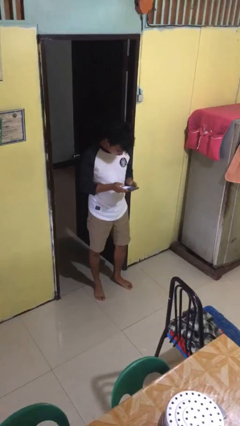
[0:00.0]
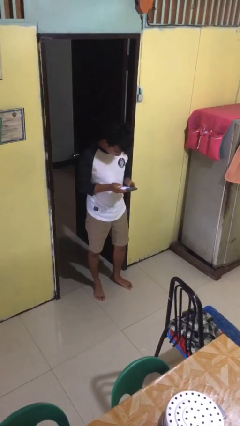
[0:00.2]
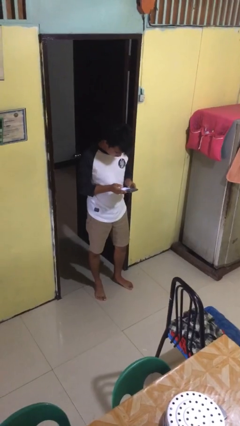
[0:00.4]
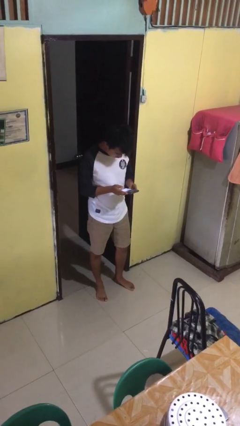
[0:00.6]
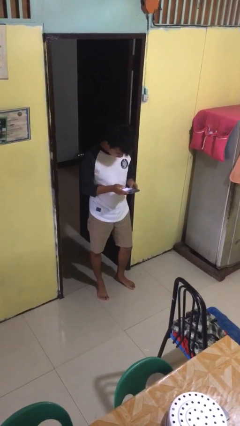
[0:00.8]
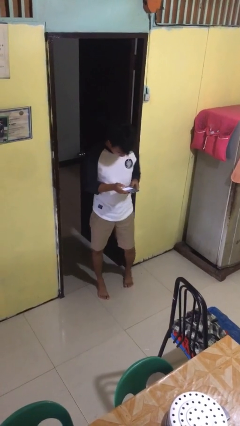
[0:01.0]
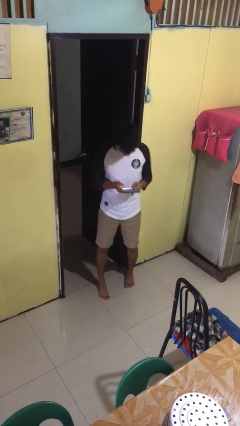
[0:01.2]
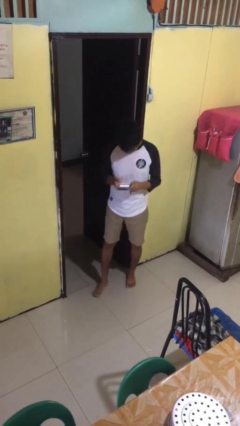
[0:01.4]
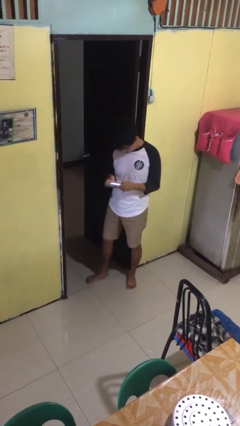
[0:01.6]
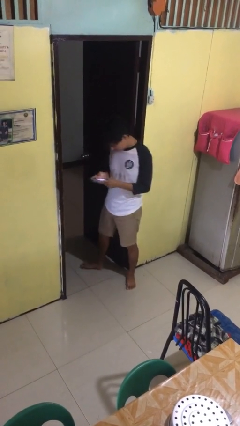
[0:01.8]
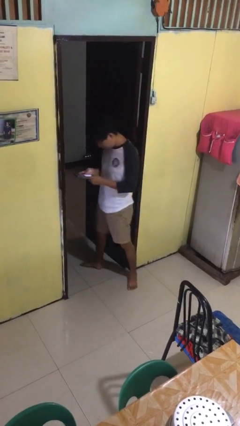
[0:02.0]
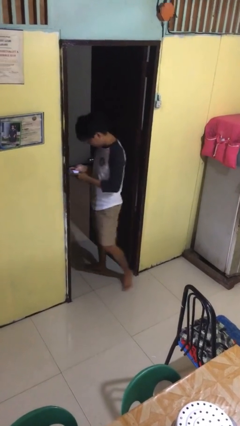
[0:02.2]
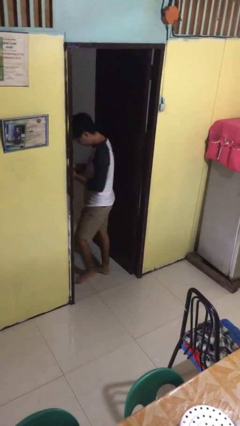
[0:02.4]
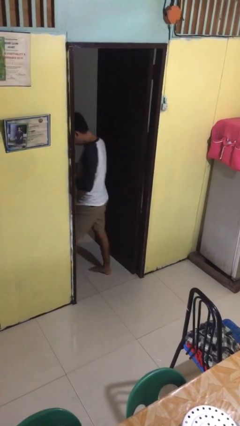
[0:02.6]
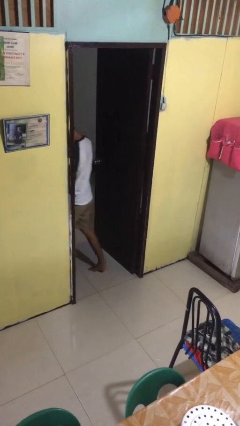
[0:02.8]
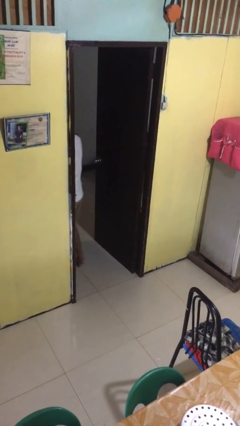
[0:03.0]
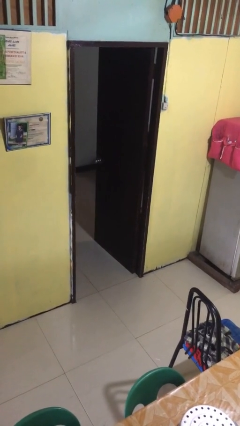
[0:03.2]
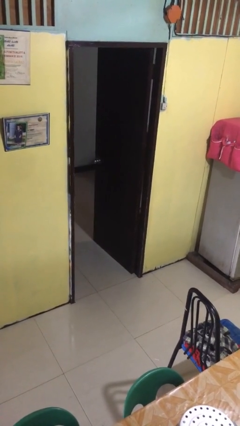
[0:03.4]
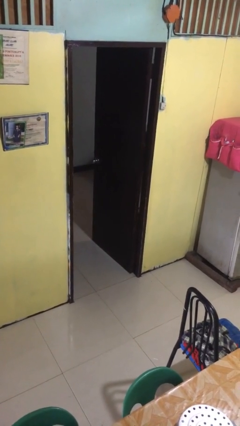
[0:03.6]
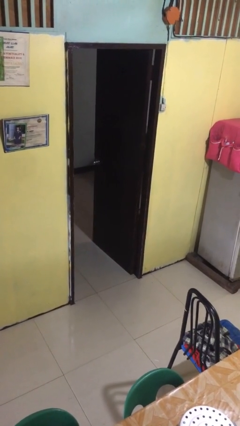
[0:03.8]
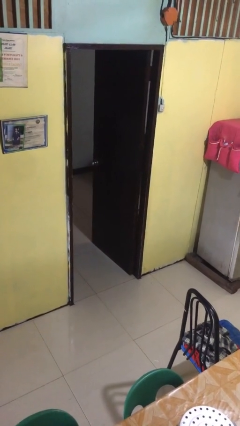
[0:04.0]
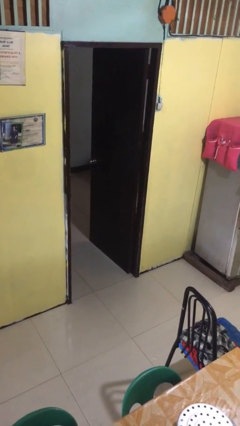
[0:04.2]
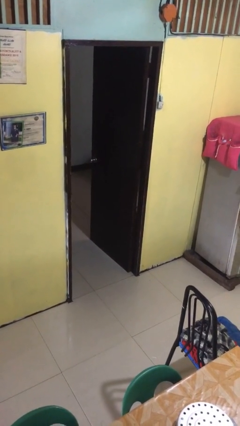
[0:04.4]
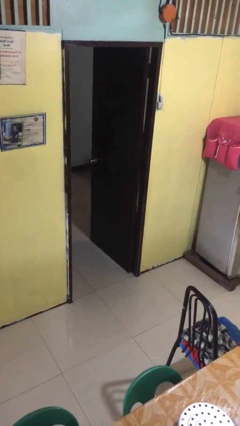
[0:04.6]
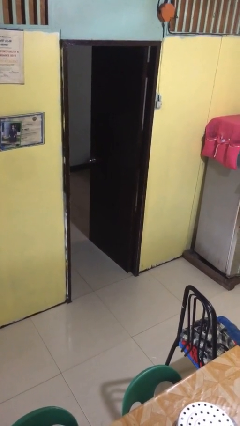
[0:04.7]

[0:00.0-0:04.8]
person exits scene through structure

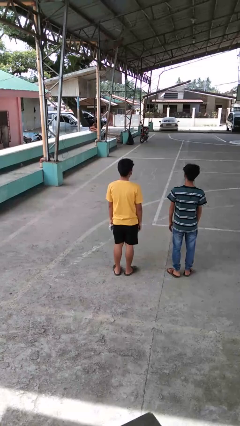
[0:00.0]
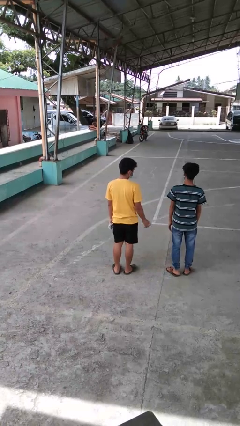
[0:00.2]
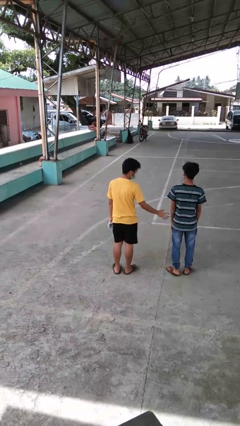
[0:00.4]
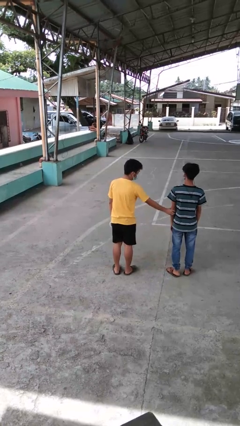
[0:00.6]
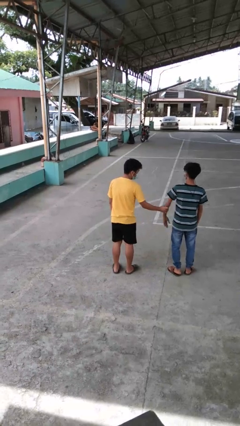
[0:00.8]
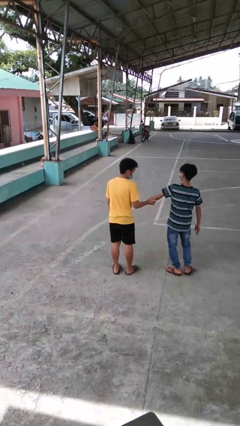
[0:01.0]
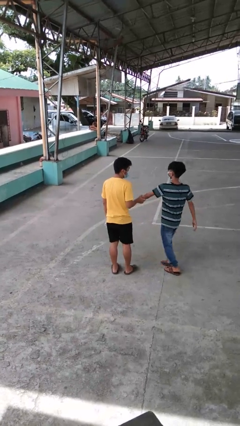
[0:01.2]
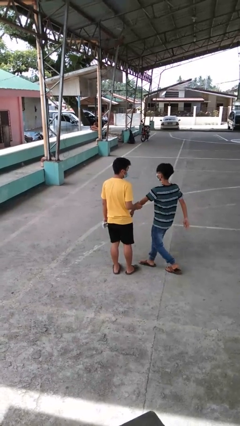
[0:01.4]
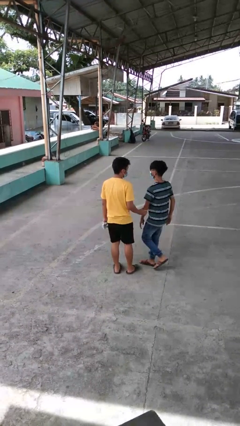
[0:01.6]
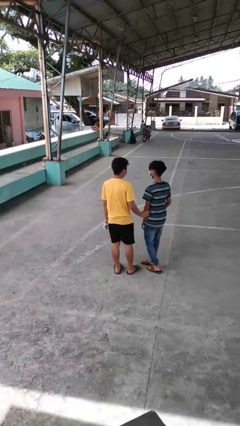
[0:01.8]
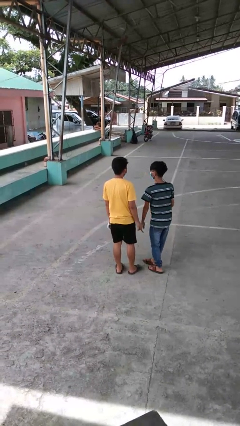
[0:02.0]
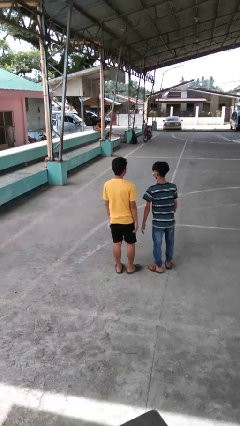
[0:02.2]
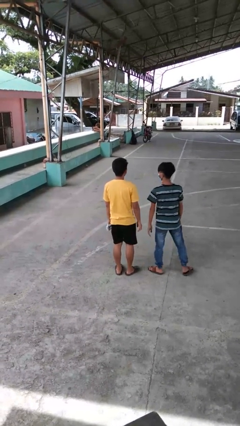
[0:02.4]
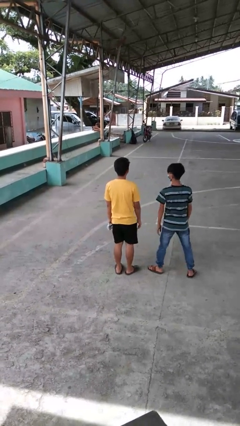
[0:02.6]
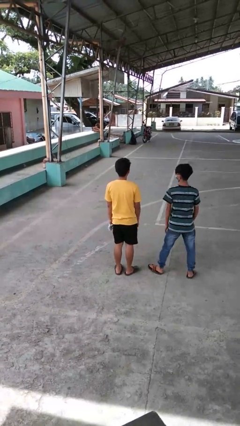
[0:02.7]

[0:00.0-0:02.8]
person grabs person by forearm

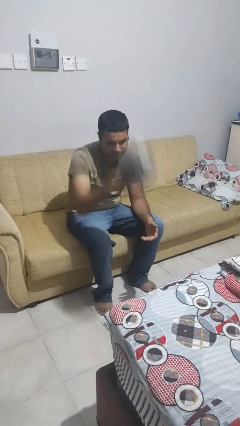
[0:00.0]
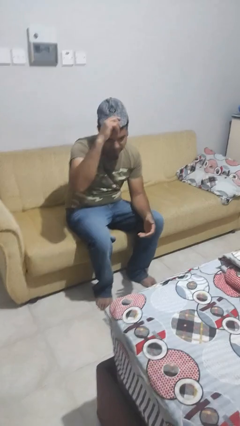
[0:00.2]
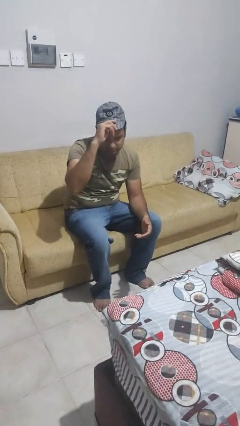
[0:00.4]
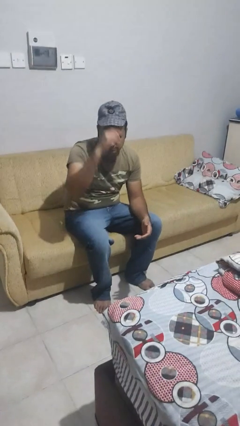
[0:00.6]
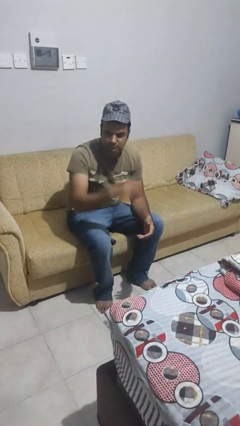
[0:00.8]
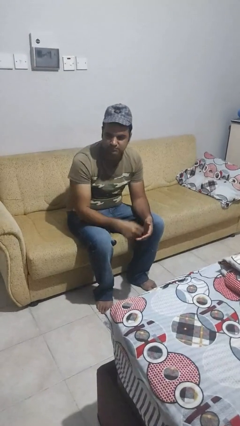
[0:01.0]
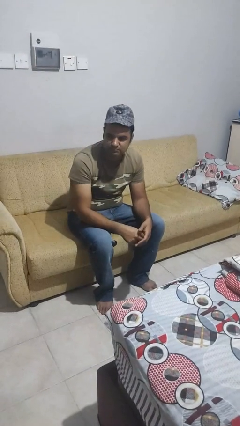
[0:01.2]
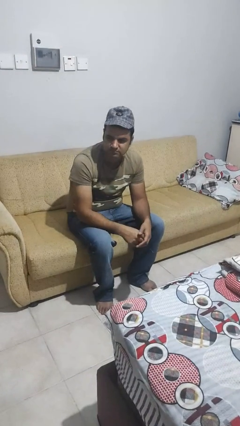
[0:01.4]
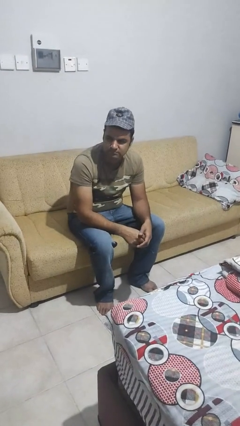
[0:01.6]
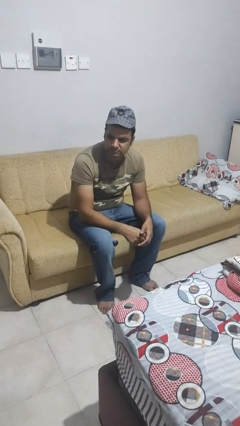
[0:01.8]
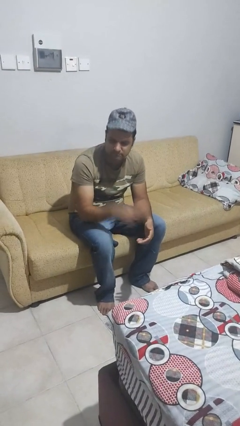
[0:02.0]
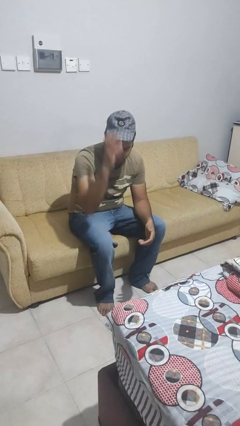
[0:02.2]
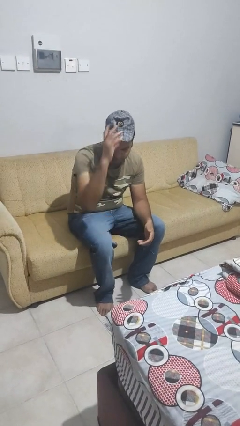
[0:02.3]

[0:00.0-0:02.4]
person puts on hat

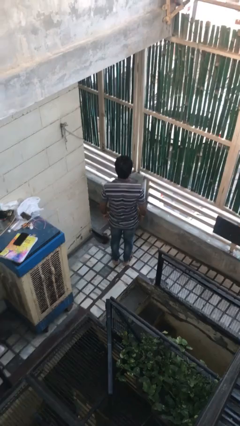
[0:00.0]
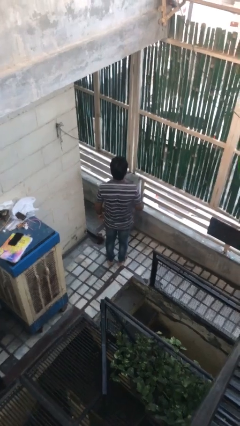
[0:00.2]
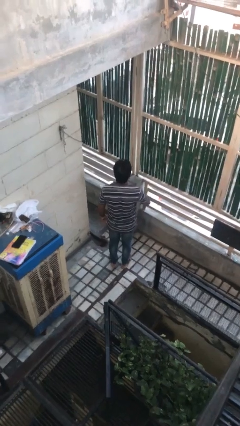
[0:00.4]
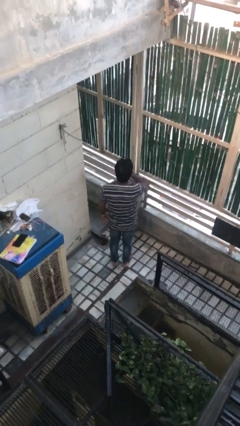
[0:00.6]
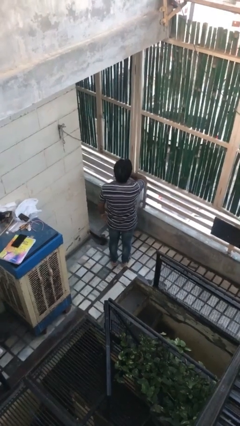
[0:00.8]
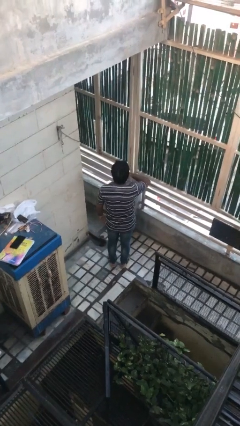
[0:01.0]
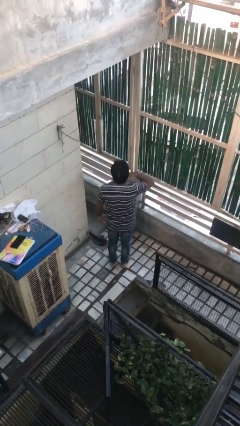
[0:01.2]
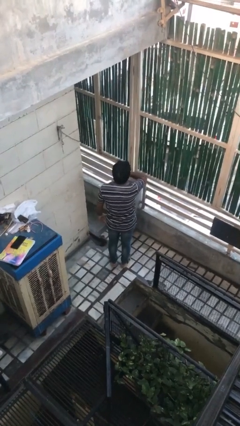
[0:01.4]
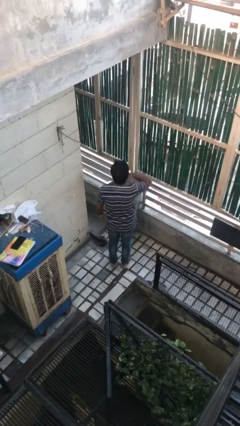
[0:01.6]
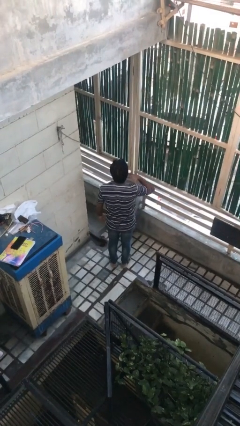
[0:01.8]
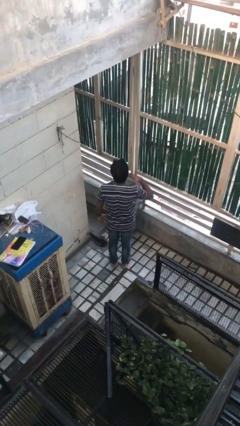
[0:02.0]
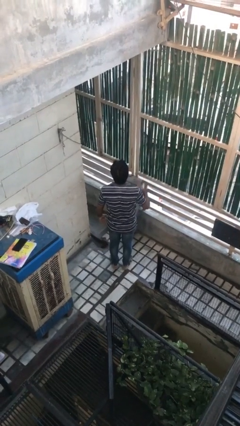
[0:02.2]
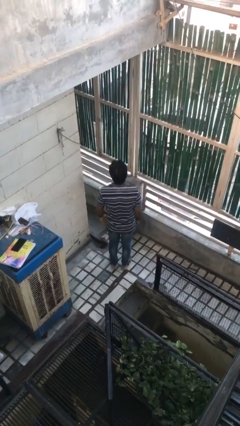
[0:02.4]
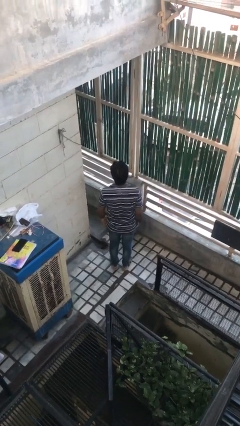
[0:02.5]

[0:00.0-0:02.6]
person gestures cut

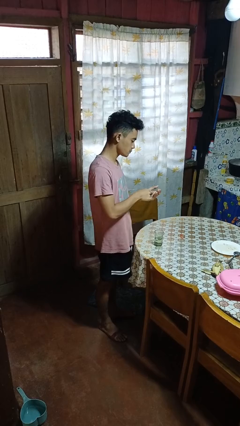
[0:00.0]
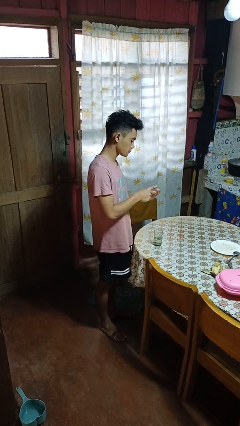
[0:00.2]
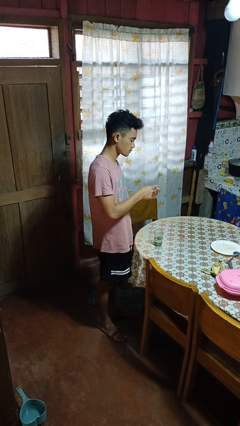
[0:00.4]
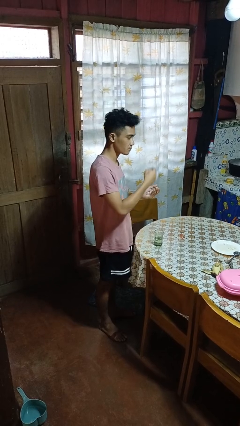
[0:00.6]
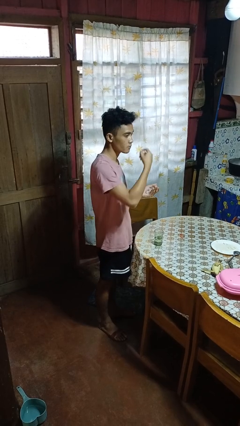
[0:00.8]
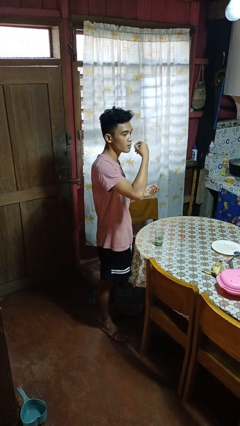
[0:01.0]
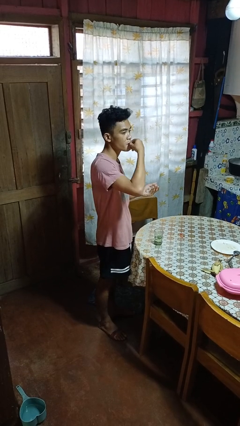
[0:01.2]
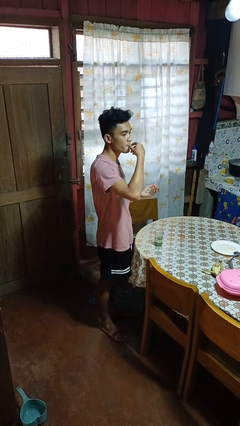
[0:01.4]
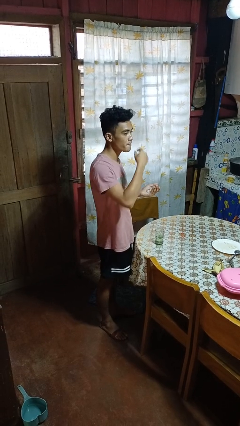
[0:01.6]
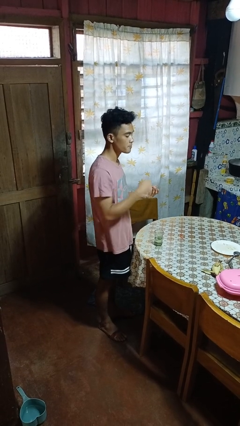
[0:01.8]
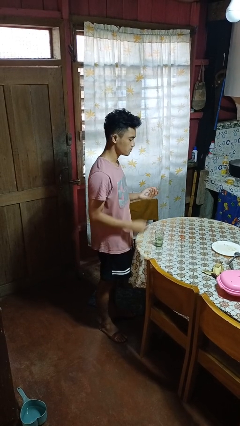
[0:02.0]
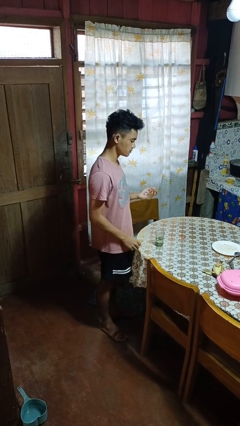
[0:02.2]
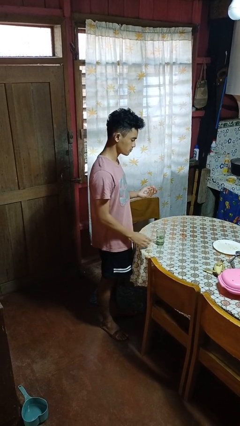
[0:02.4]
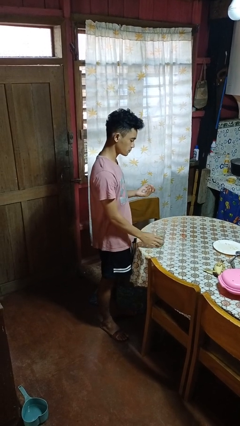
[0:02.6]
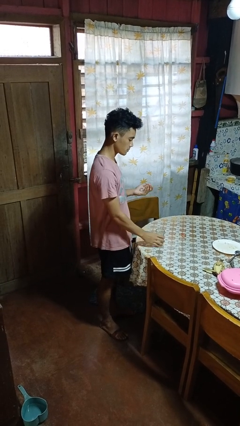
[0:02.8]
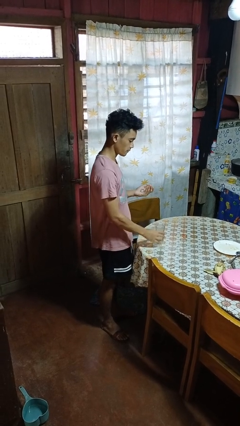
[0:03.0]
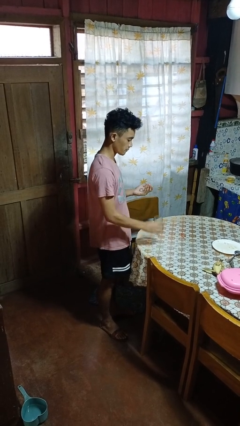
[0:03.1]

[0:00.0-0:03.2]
person takes medicine pills

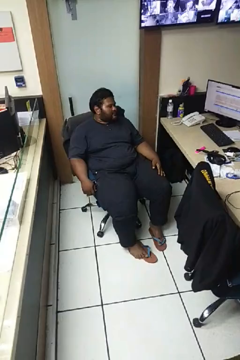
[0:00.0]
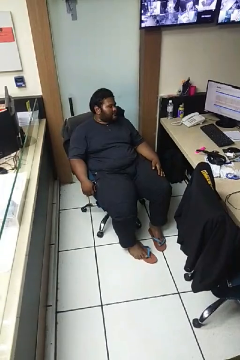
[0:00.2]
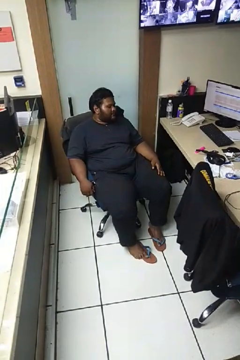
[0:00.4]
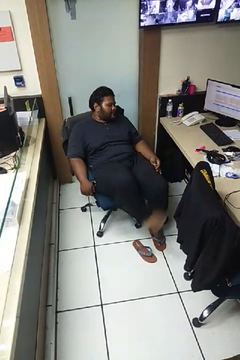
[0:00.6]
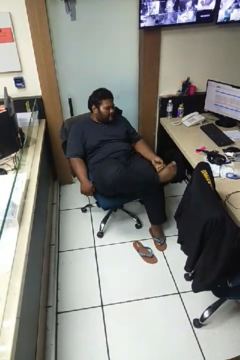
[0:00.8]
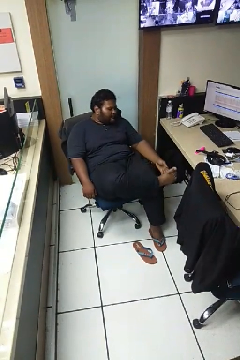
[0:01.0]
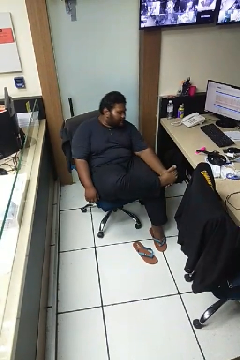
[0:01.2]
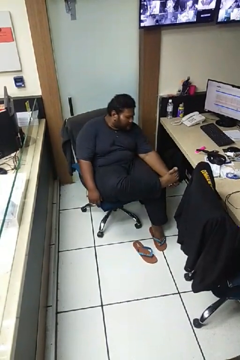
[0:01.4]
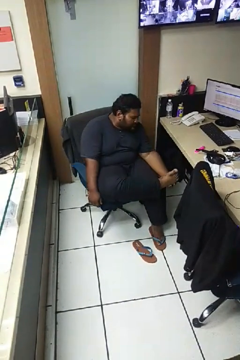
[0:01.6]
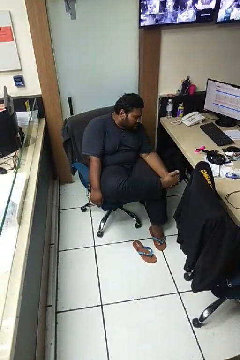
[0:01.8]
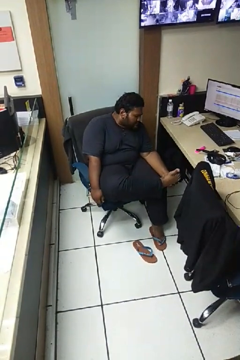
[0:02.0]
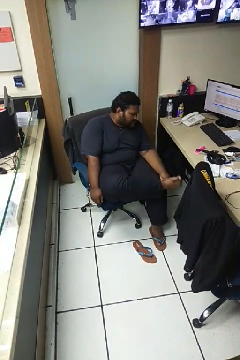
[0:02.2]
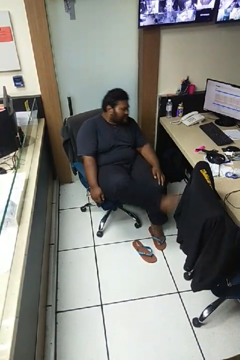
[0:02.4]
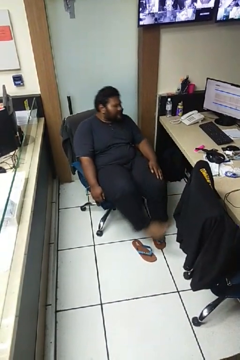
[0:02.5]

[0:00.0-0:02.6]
person rubs foot
